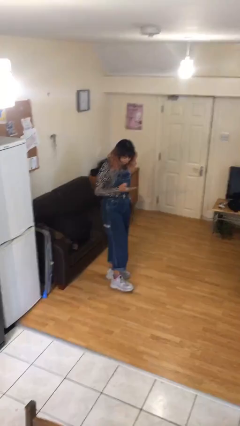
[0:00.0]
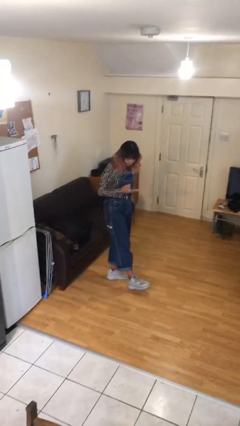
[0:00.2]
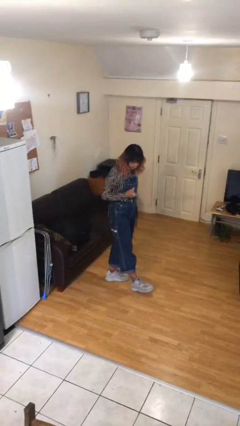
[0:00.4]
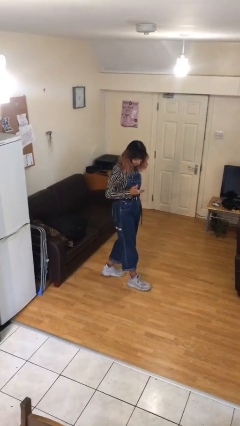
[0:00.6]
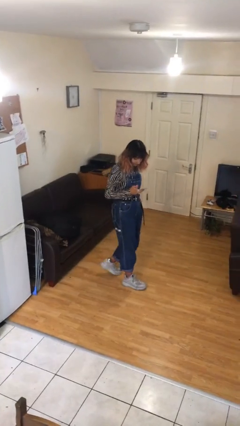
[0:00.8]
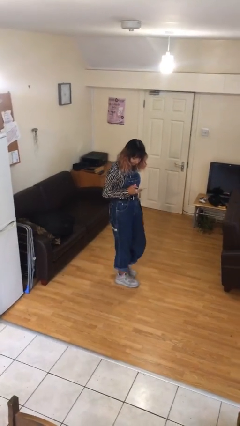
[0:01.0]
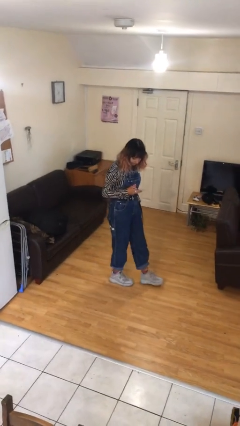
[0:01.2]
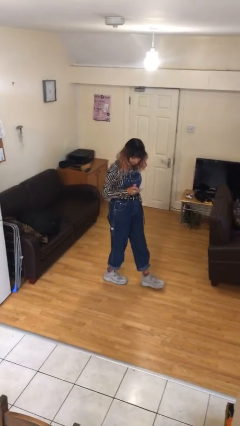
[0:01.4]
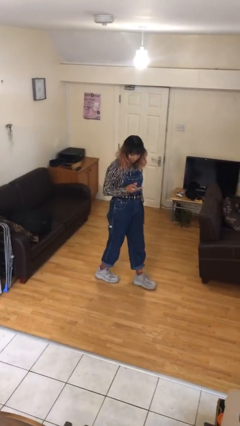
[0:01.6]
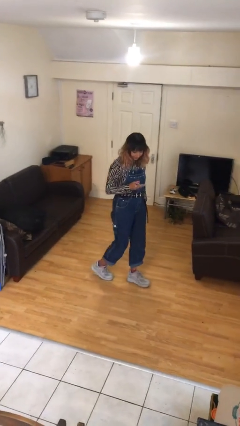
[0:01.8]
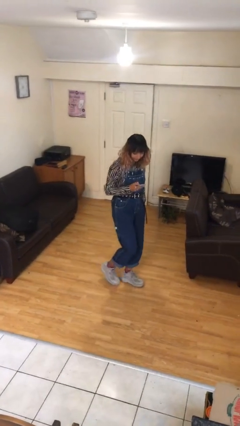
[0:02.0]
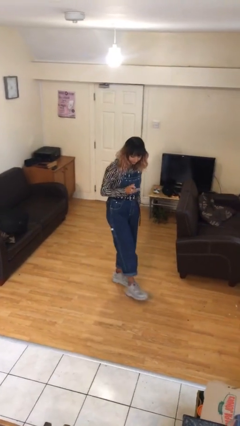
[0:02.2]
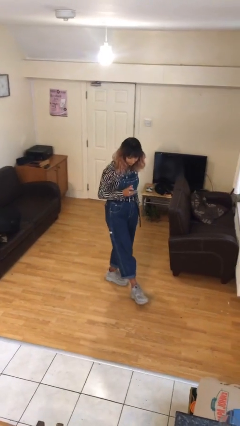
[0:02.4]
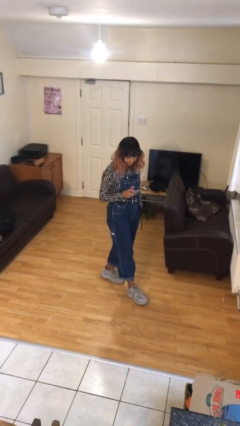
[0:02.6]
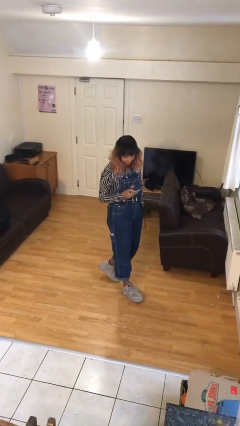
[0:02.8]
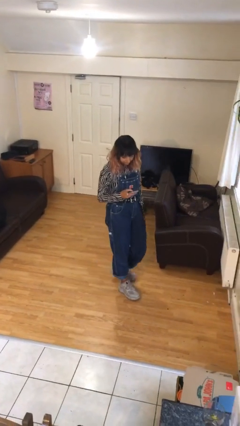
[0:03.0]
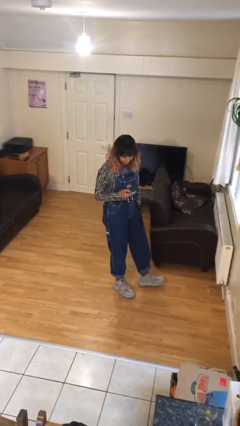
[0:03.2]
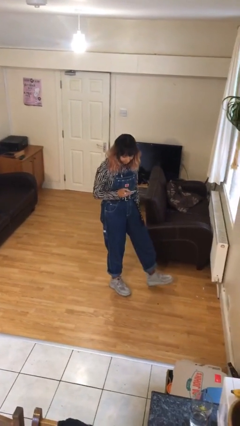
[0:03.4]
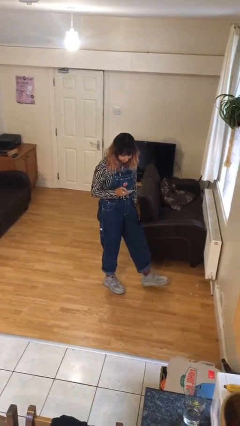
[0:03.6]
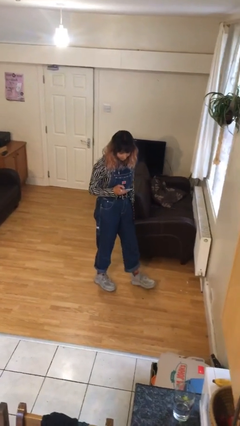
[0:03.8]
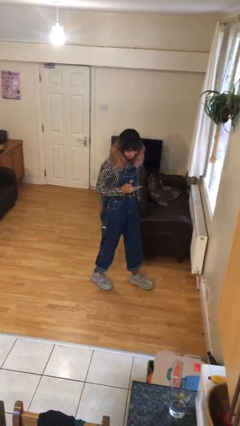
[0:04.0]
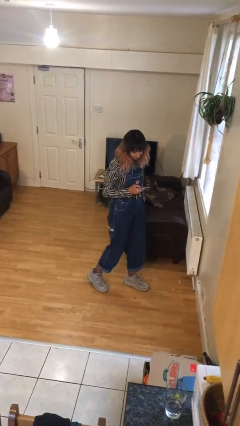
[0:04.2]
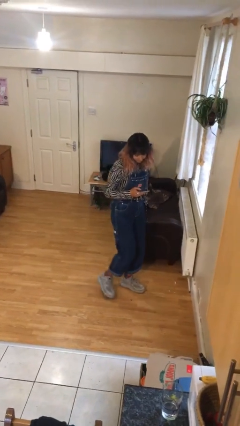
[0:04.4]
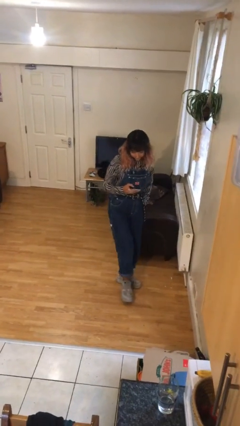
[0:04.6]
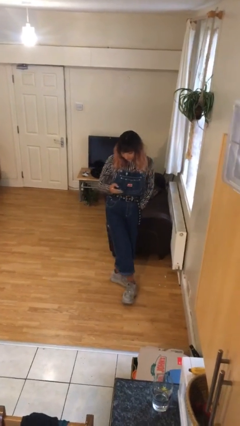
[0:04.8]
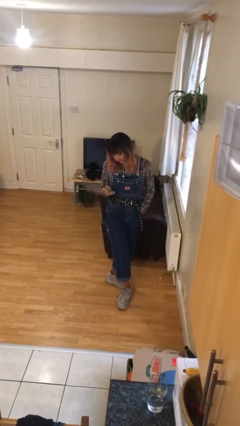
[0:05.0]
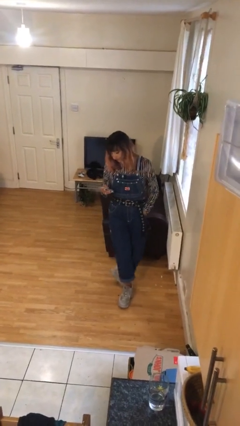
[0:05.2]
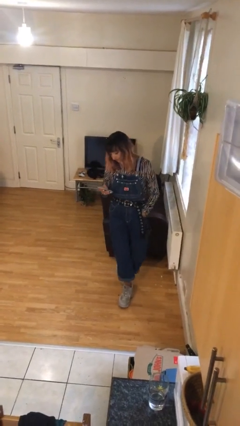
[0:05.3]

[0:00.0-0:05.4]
person texts on phone

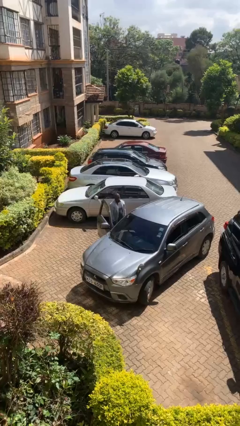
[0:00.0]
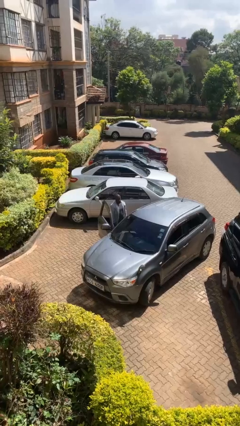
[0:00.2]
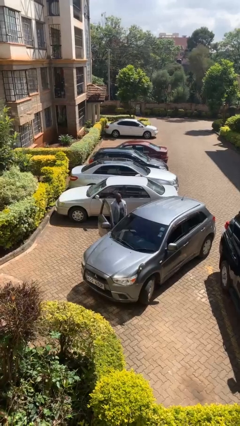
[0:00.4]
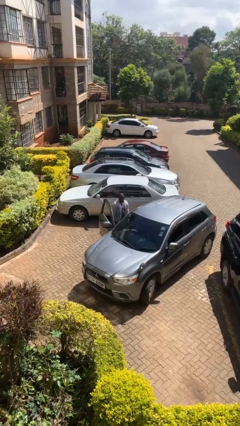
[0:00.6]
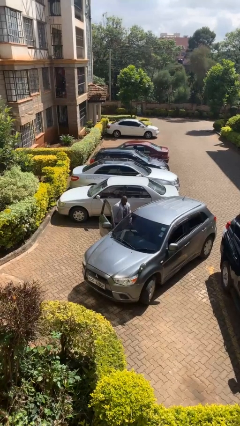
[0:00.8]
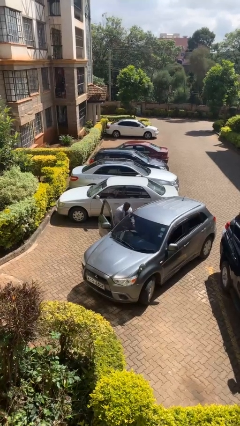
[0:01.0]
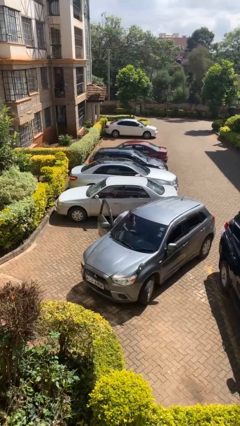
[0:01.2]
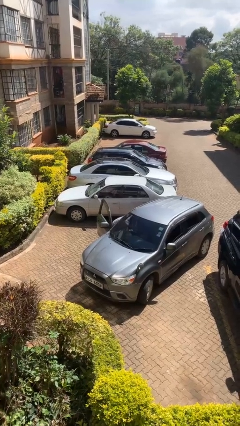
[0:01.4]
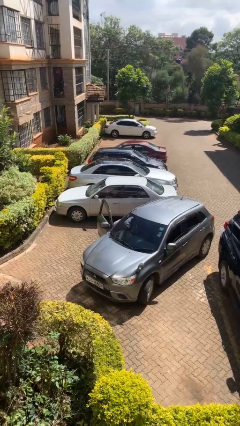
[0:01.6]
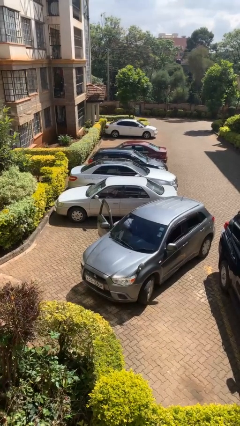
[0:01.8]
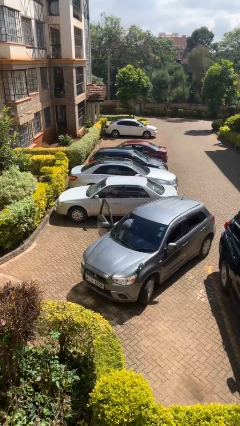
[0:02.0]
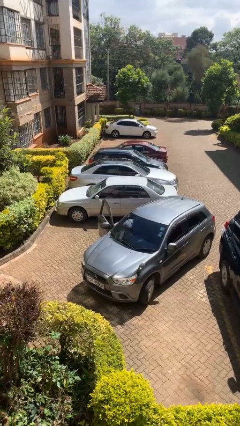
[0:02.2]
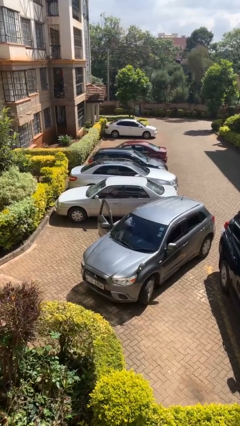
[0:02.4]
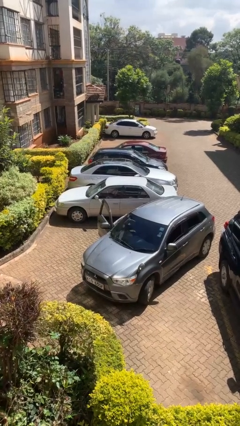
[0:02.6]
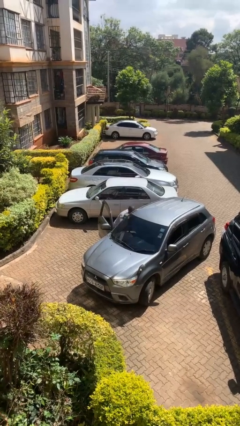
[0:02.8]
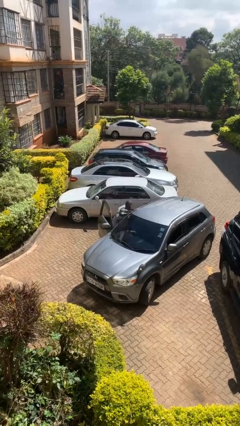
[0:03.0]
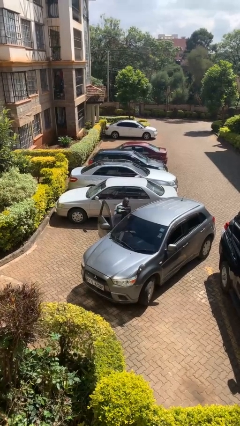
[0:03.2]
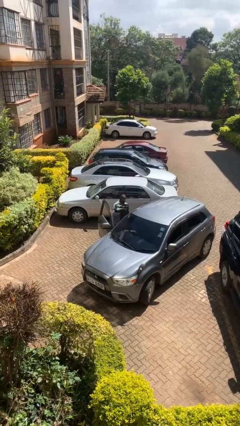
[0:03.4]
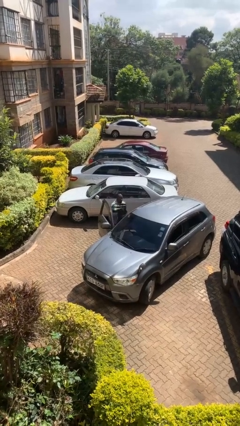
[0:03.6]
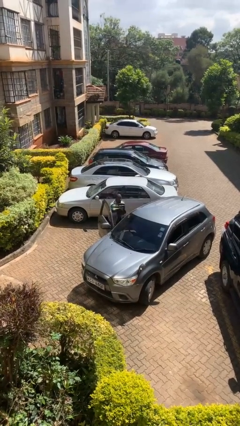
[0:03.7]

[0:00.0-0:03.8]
person unloads car

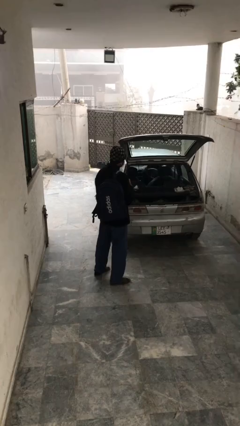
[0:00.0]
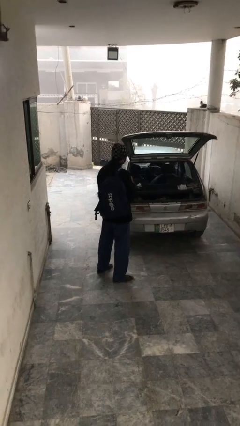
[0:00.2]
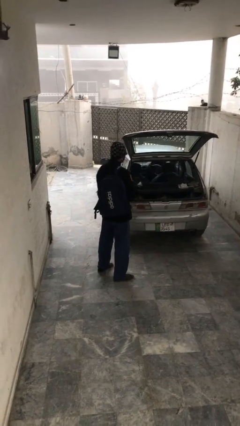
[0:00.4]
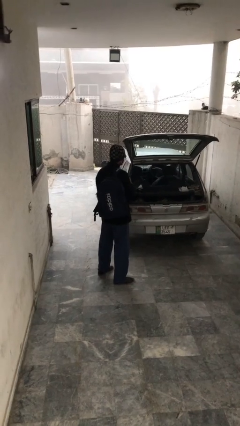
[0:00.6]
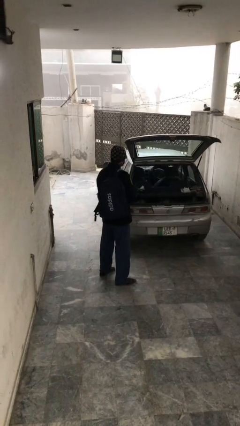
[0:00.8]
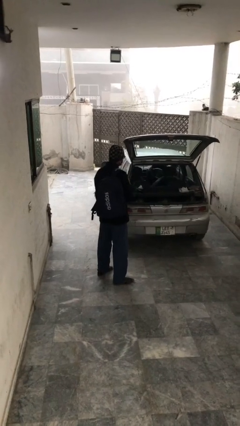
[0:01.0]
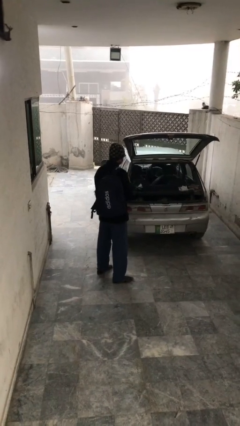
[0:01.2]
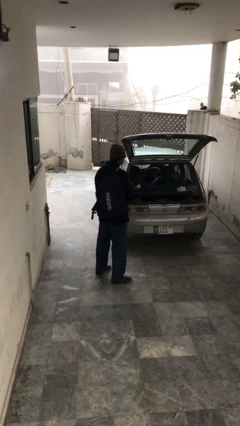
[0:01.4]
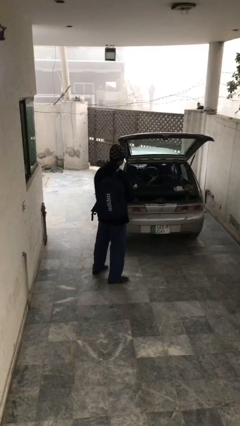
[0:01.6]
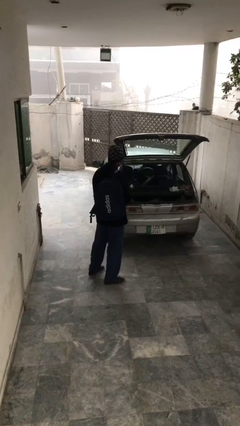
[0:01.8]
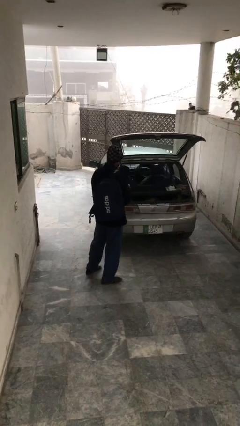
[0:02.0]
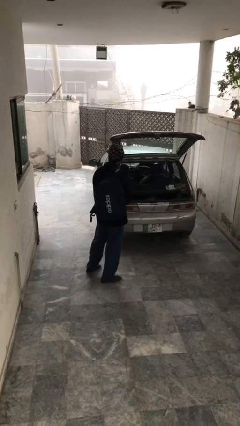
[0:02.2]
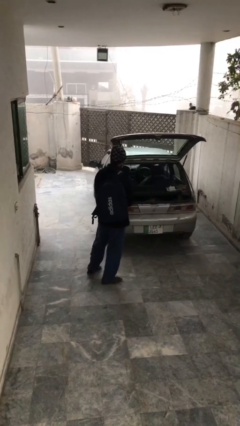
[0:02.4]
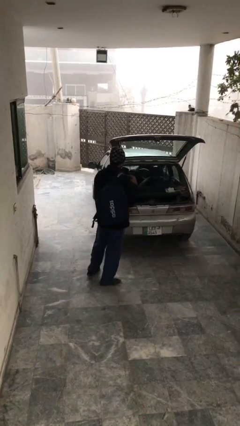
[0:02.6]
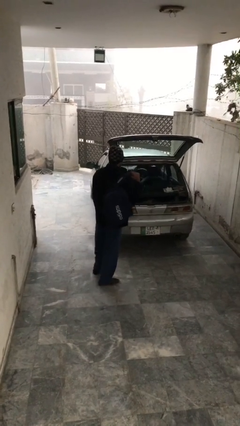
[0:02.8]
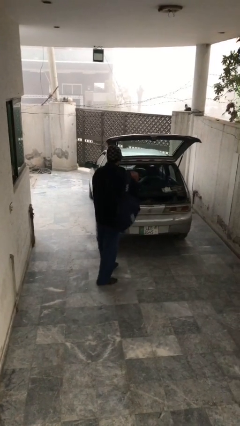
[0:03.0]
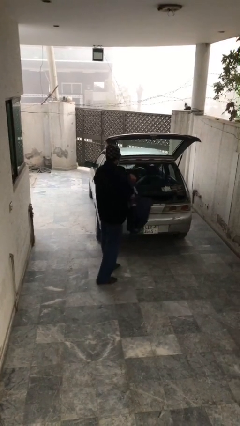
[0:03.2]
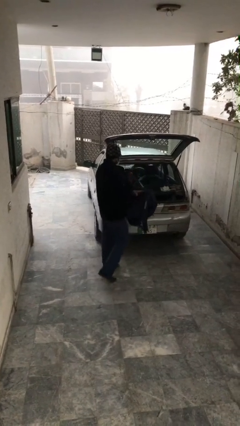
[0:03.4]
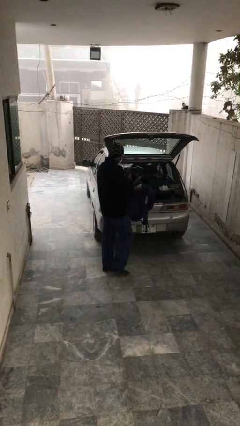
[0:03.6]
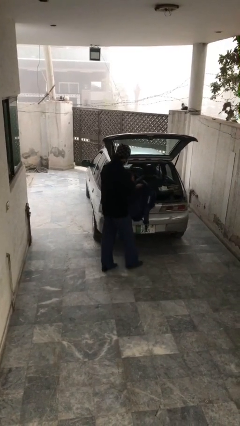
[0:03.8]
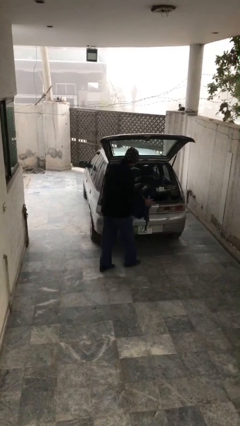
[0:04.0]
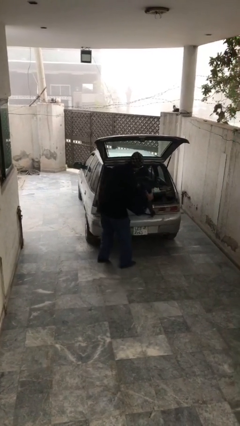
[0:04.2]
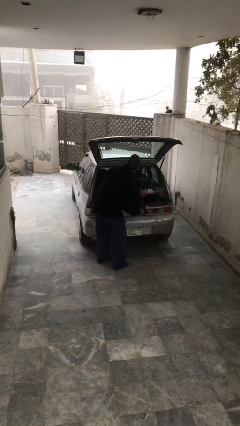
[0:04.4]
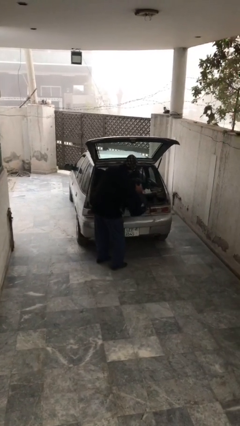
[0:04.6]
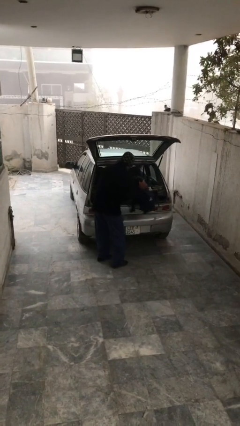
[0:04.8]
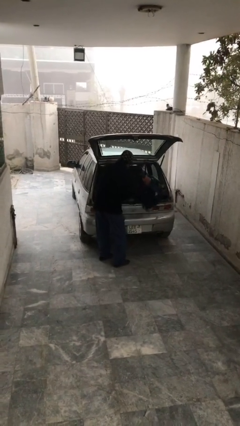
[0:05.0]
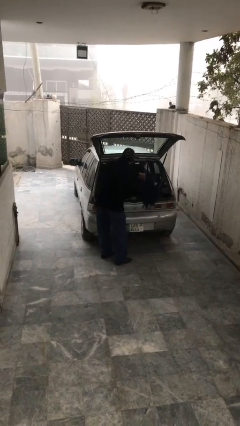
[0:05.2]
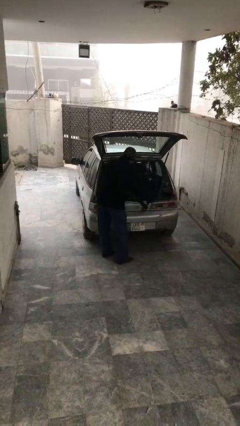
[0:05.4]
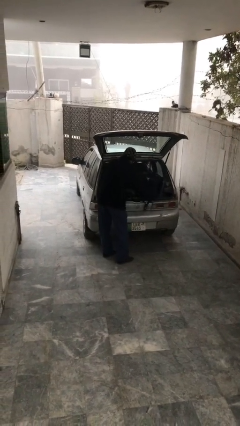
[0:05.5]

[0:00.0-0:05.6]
person loads car

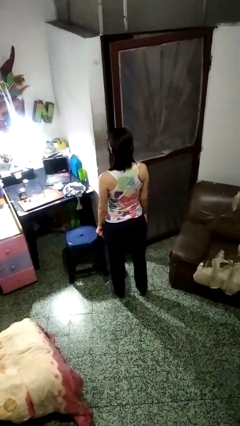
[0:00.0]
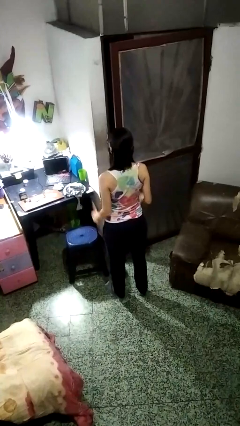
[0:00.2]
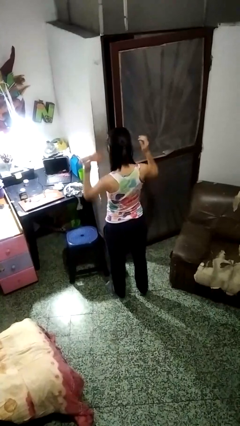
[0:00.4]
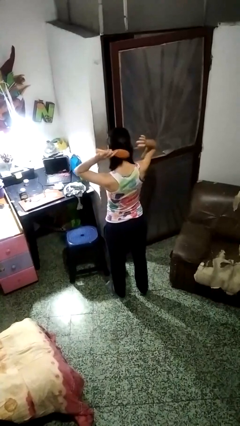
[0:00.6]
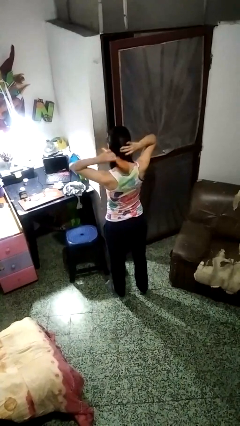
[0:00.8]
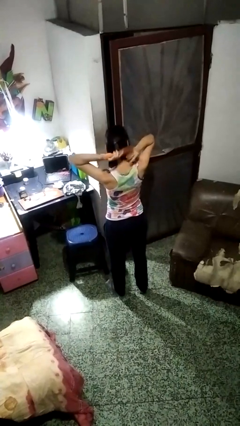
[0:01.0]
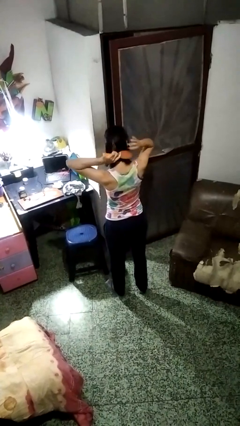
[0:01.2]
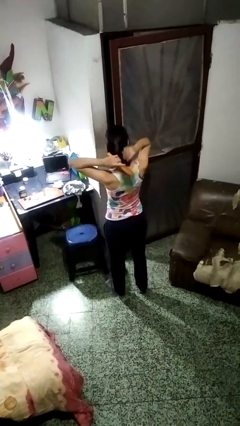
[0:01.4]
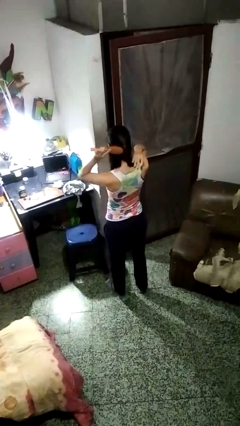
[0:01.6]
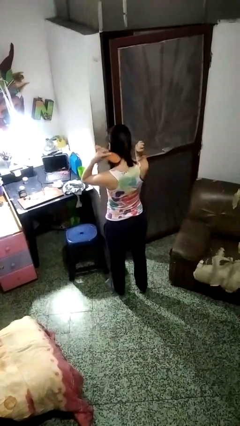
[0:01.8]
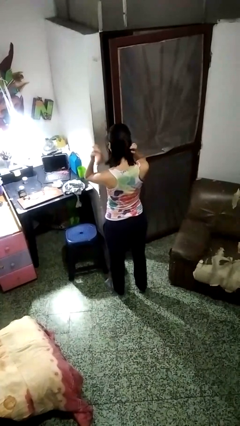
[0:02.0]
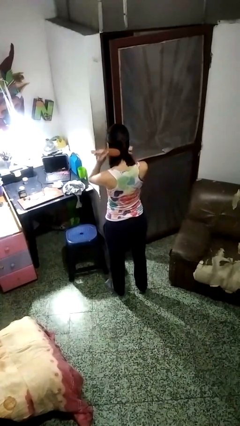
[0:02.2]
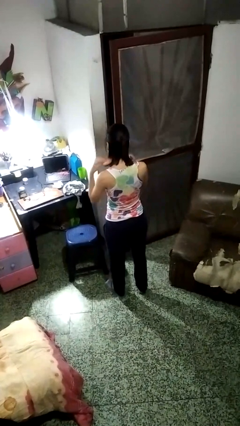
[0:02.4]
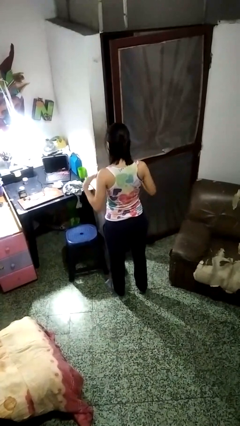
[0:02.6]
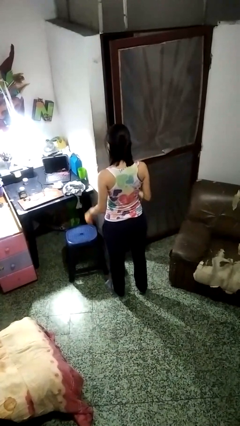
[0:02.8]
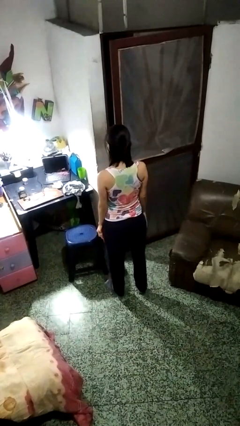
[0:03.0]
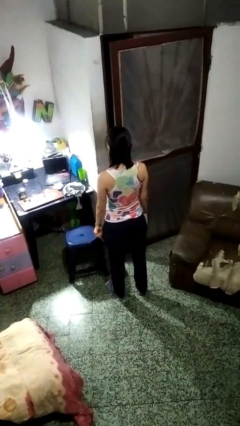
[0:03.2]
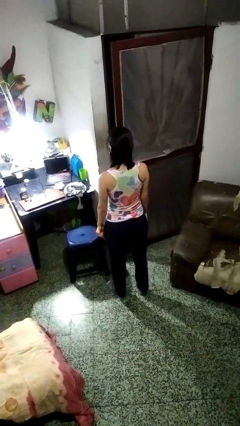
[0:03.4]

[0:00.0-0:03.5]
person brushes hair
